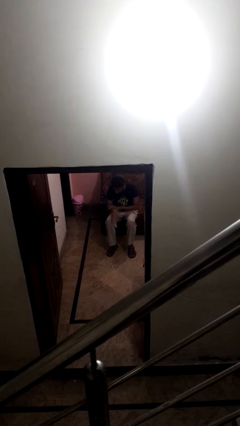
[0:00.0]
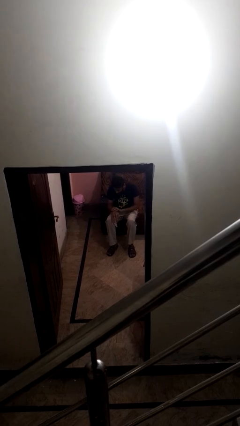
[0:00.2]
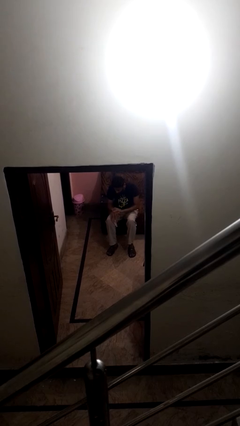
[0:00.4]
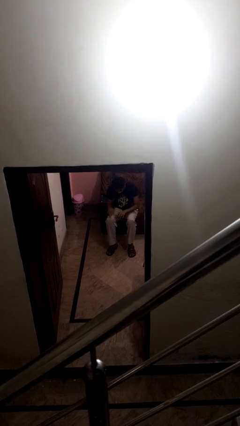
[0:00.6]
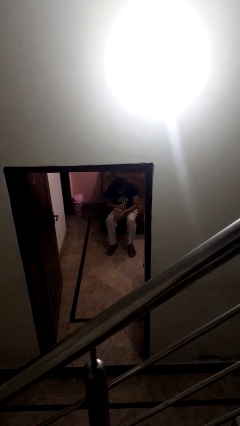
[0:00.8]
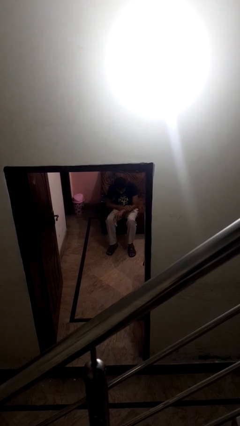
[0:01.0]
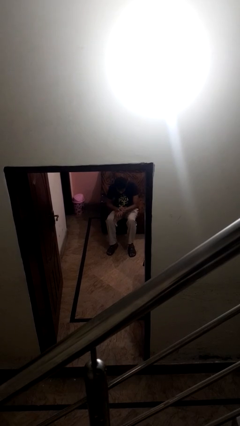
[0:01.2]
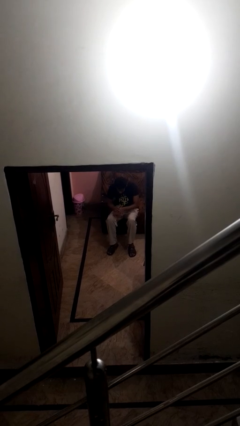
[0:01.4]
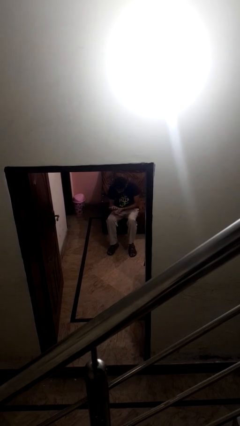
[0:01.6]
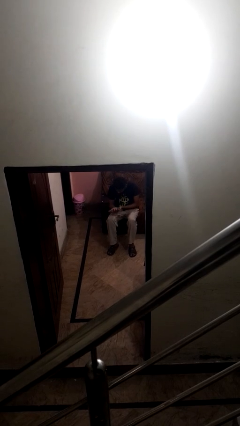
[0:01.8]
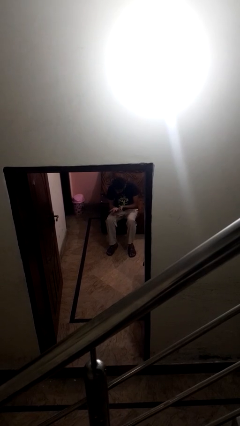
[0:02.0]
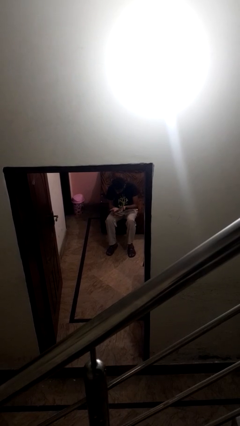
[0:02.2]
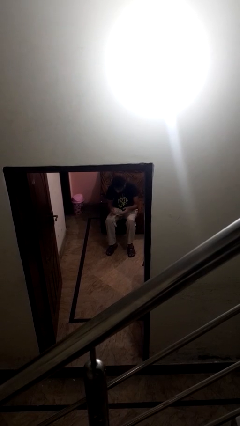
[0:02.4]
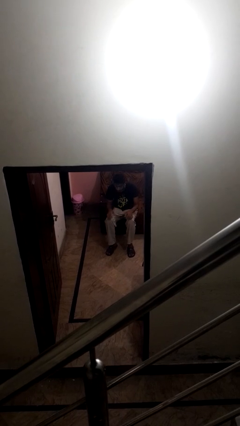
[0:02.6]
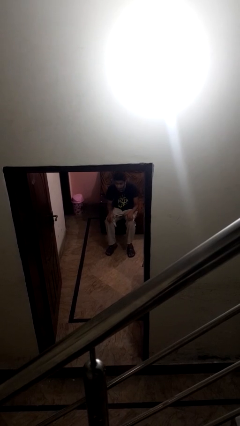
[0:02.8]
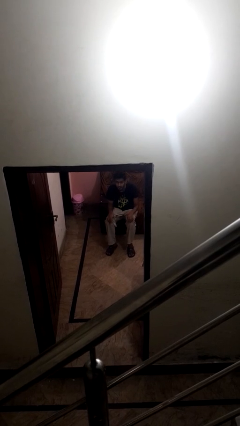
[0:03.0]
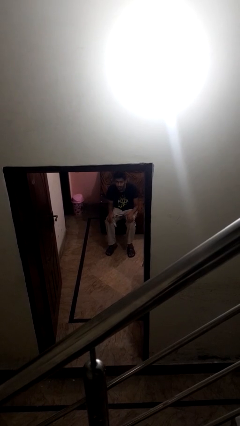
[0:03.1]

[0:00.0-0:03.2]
person looks at hands in lap

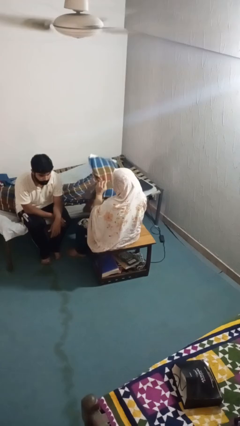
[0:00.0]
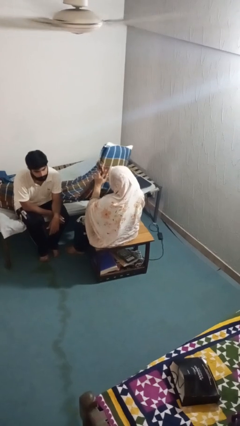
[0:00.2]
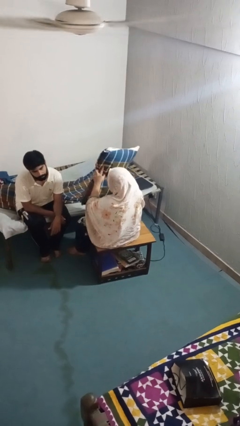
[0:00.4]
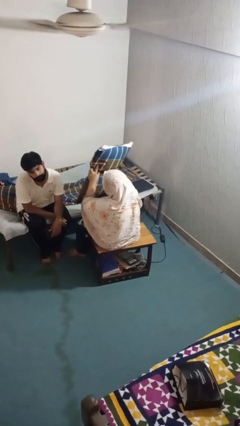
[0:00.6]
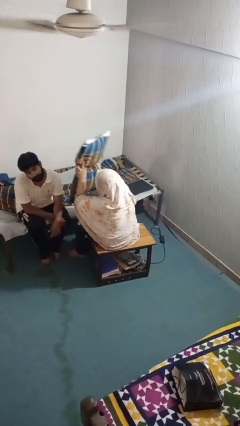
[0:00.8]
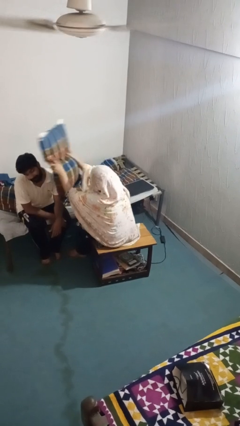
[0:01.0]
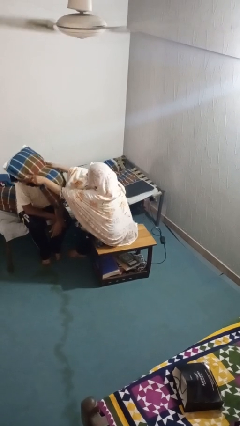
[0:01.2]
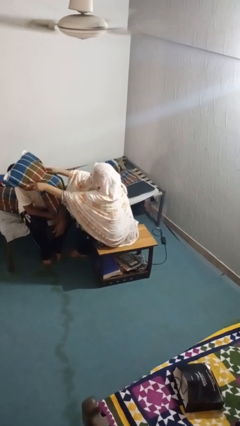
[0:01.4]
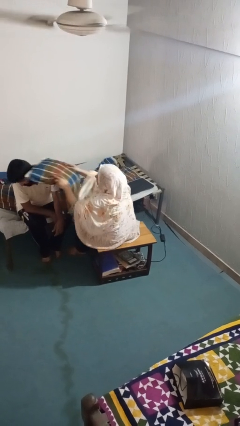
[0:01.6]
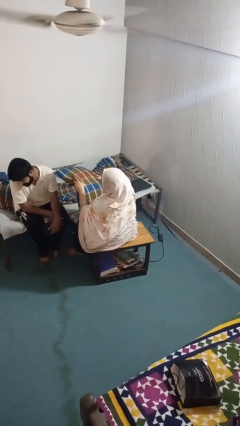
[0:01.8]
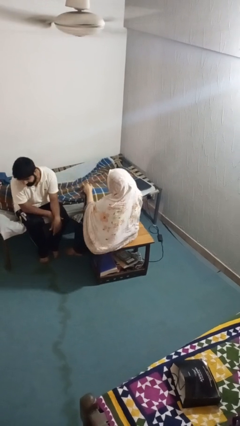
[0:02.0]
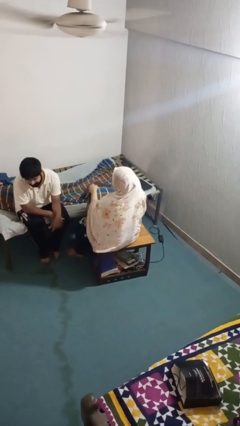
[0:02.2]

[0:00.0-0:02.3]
person hits person with pillow

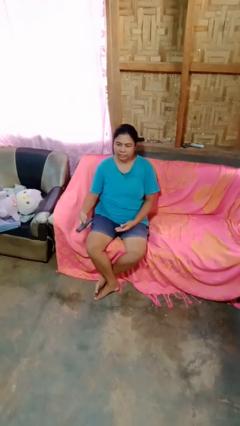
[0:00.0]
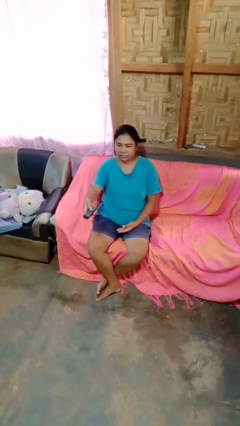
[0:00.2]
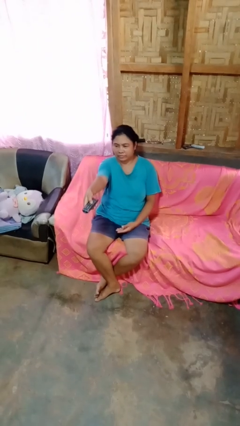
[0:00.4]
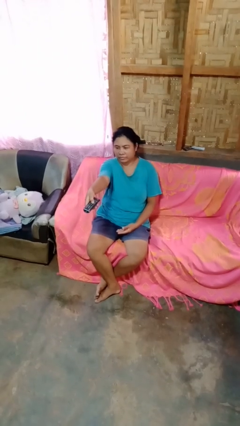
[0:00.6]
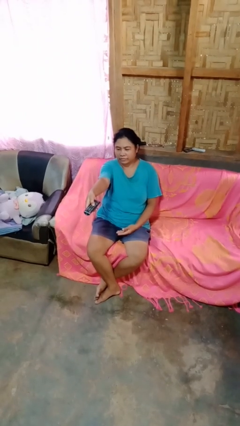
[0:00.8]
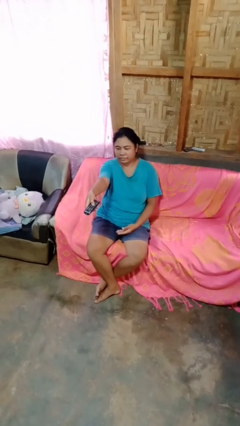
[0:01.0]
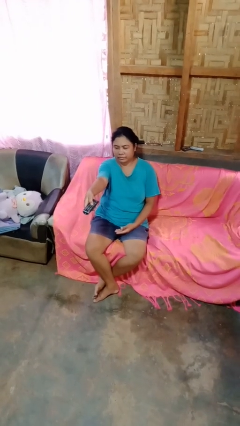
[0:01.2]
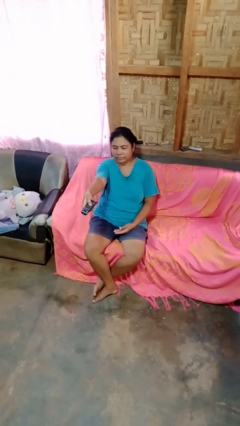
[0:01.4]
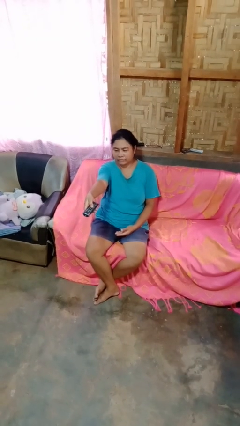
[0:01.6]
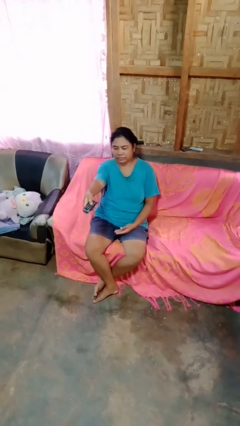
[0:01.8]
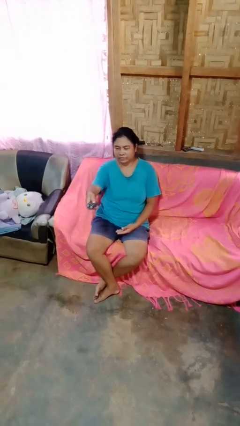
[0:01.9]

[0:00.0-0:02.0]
person uses television remote

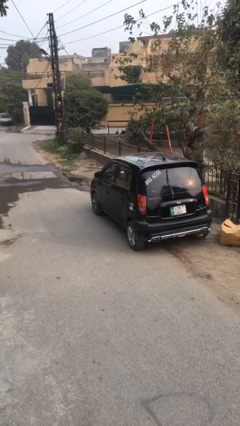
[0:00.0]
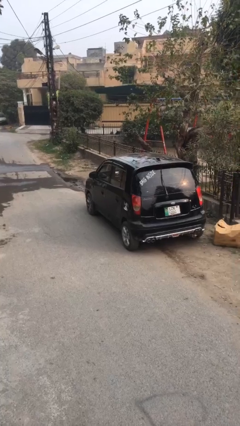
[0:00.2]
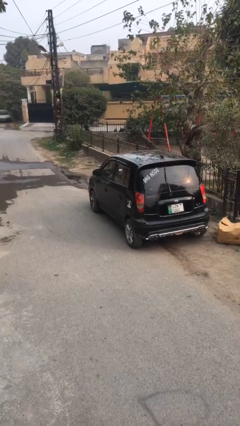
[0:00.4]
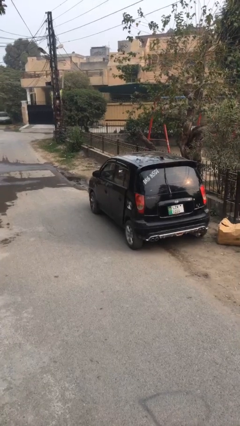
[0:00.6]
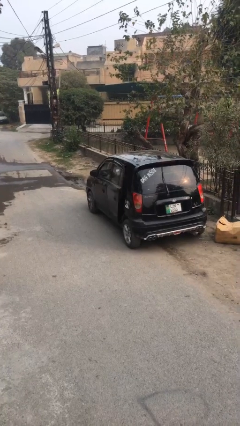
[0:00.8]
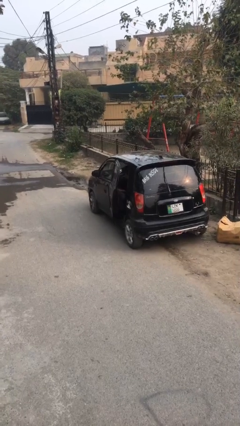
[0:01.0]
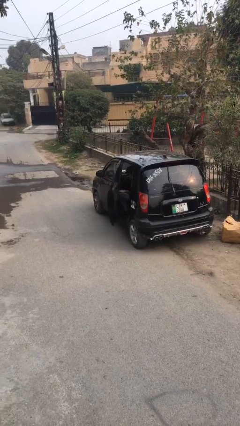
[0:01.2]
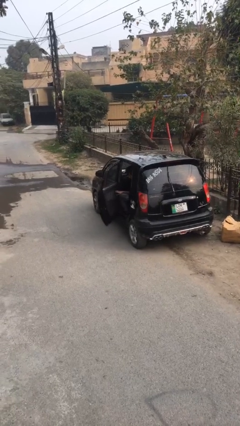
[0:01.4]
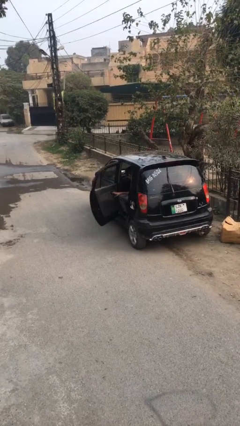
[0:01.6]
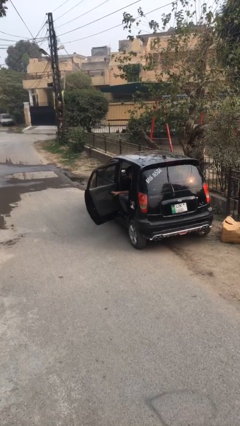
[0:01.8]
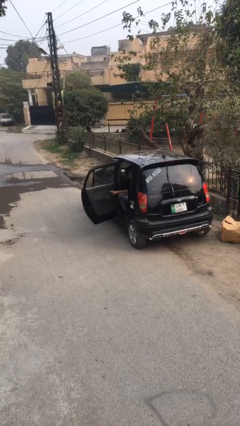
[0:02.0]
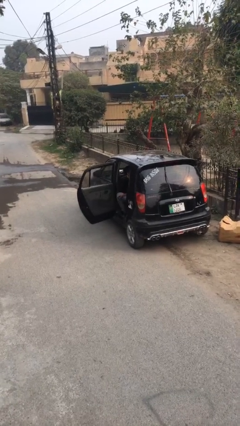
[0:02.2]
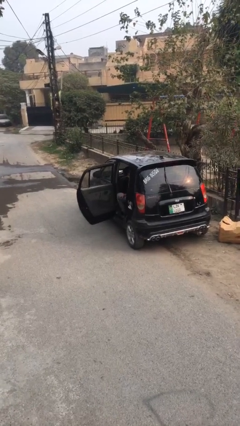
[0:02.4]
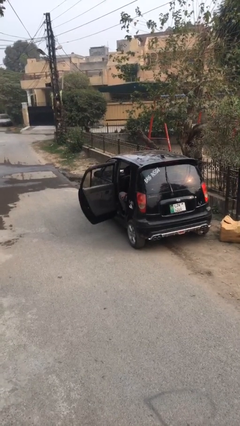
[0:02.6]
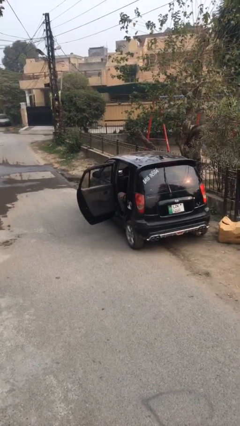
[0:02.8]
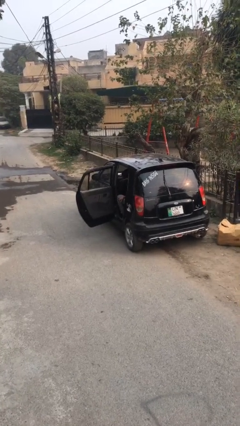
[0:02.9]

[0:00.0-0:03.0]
person opens car door

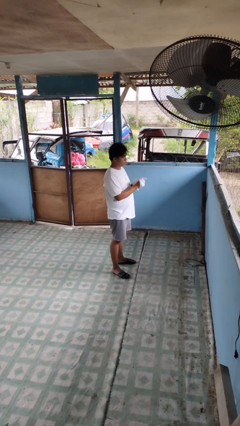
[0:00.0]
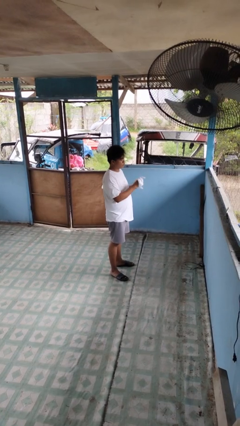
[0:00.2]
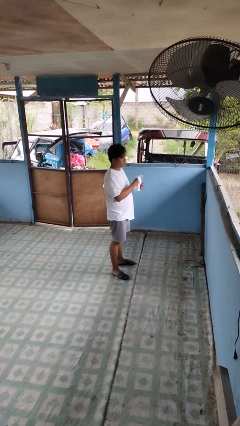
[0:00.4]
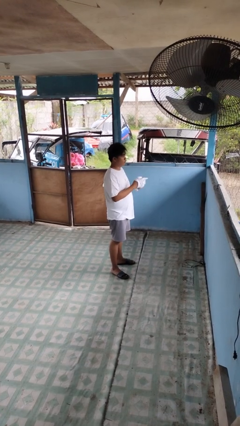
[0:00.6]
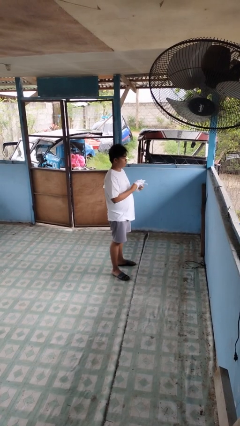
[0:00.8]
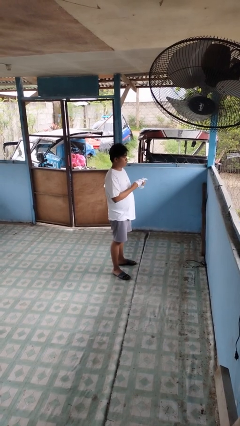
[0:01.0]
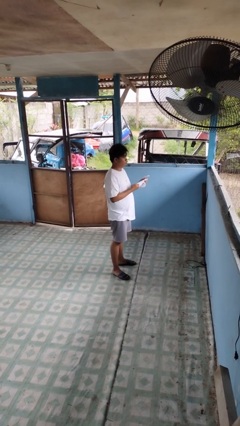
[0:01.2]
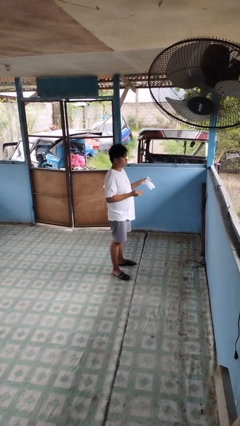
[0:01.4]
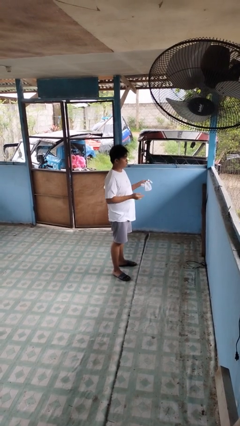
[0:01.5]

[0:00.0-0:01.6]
person takes off gloves

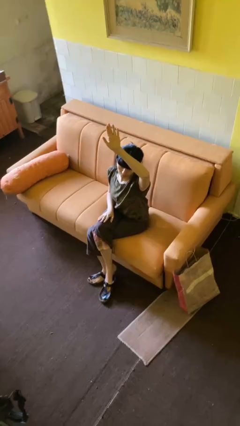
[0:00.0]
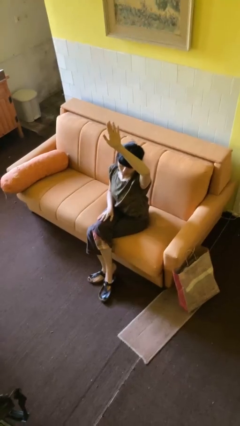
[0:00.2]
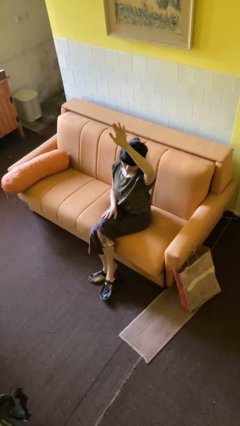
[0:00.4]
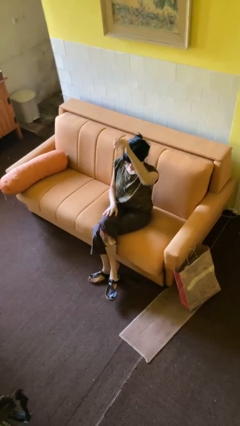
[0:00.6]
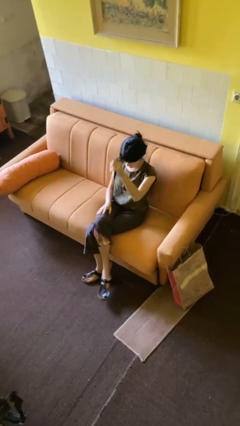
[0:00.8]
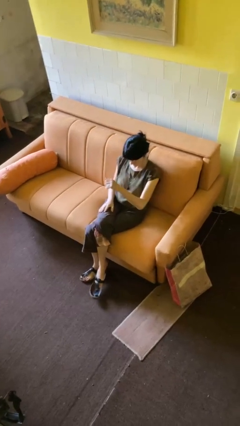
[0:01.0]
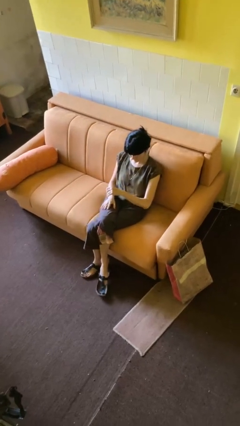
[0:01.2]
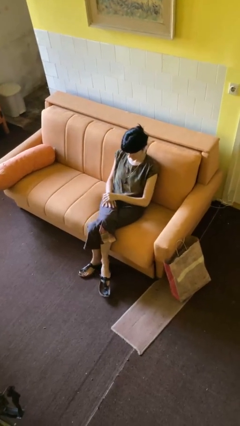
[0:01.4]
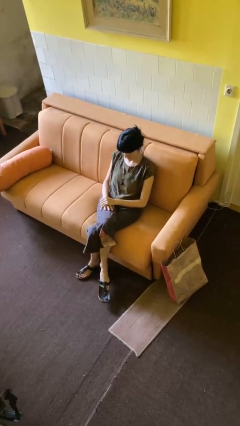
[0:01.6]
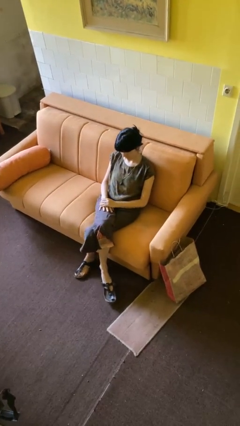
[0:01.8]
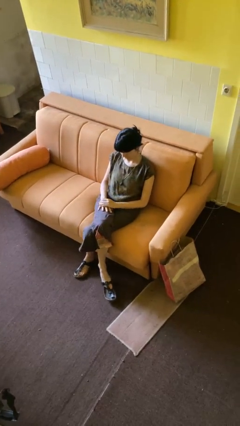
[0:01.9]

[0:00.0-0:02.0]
person gestures lower hand

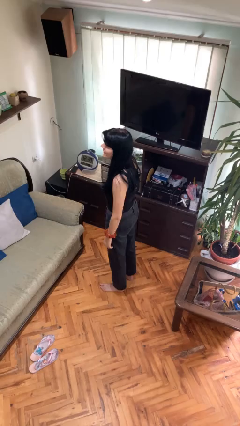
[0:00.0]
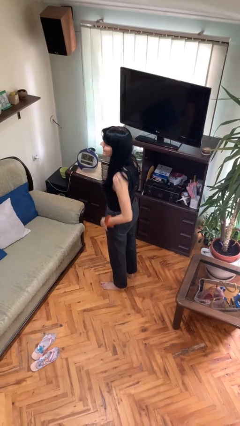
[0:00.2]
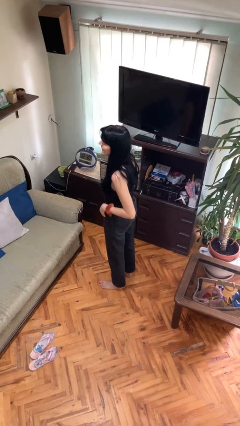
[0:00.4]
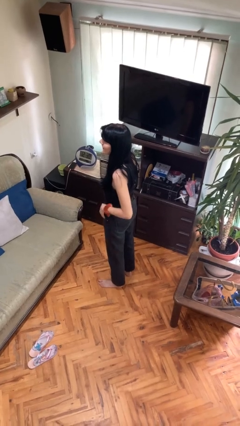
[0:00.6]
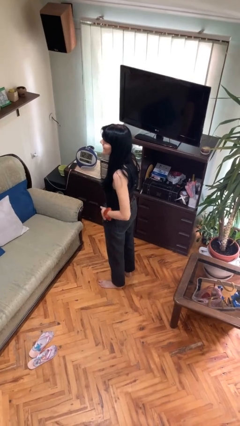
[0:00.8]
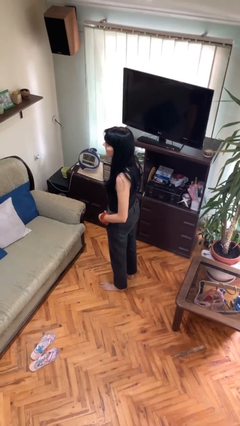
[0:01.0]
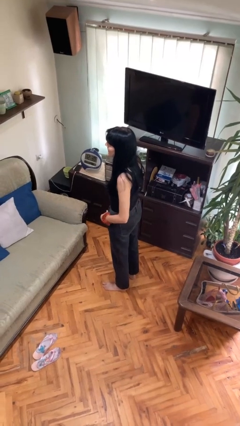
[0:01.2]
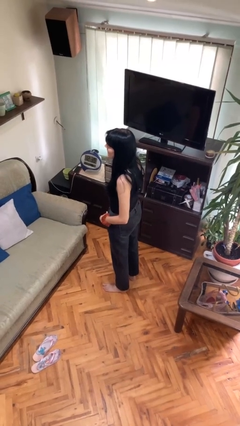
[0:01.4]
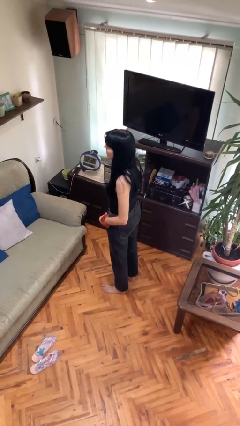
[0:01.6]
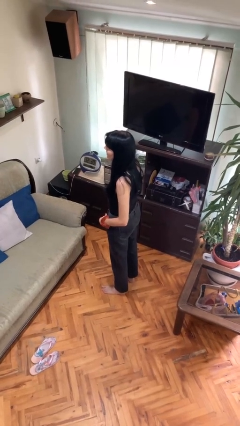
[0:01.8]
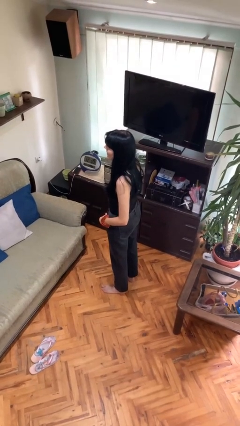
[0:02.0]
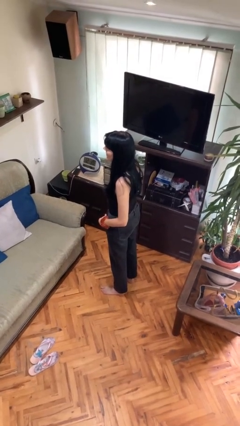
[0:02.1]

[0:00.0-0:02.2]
person puts hands in back pockets

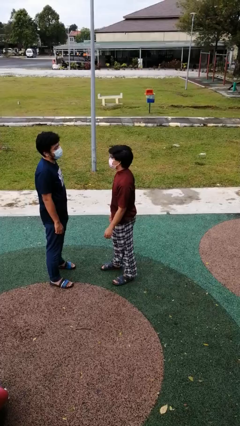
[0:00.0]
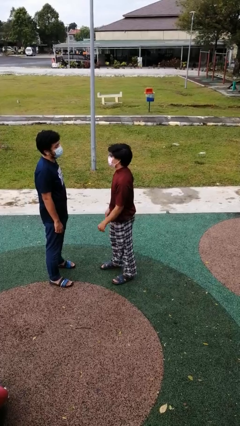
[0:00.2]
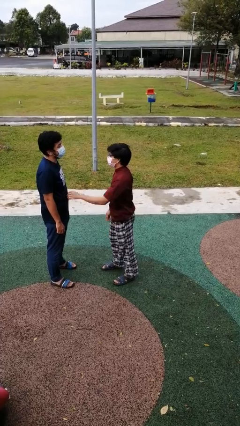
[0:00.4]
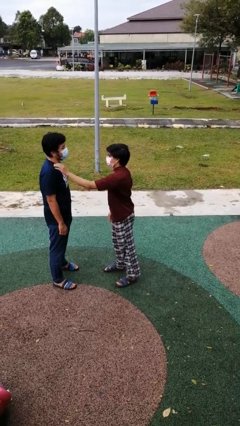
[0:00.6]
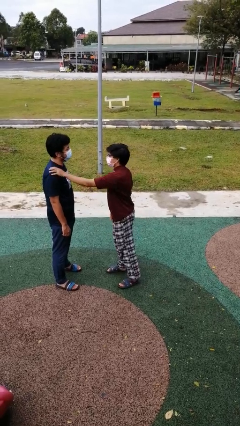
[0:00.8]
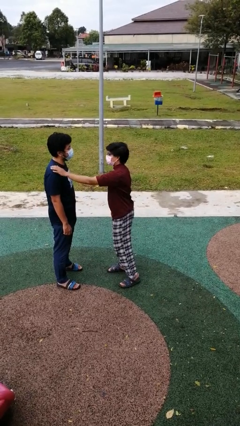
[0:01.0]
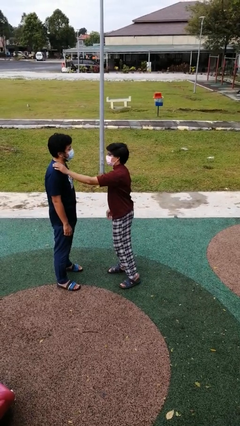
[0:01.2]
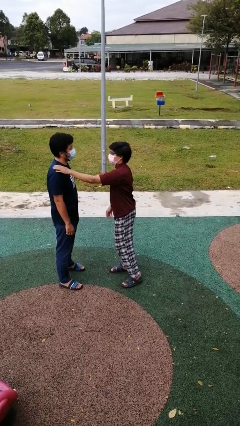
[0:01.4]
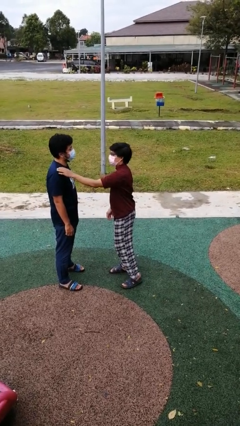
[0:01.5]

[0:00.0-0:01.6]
person pounds shoulders of person
